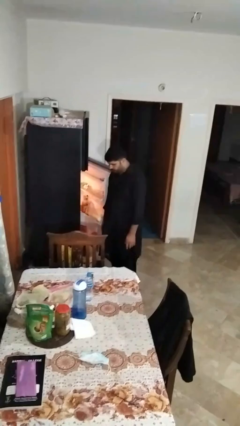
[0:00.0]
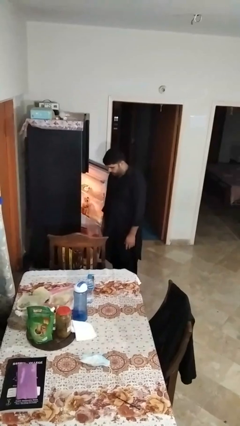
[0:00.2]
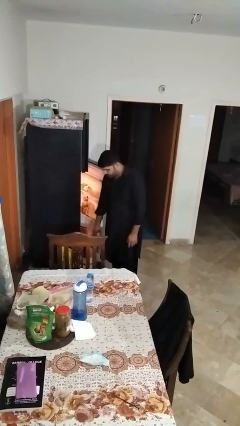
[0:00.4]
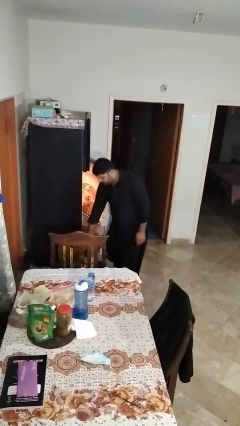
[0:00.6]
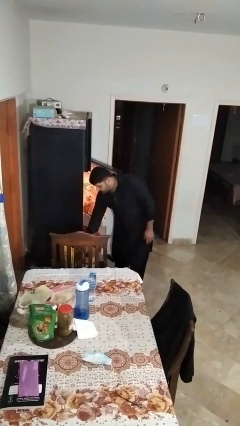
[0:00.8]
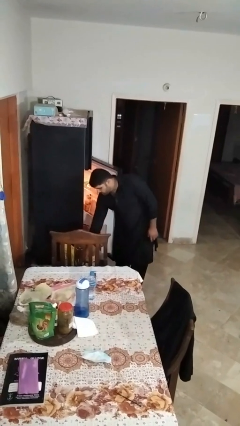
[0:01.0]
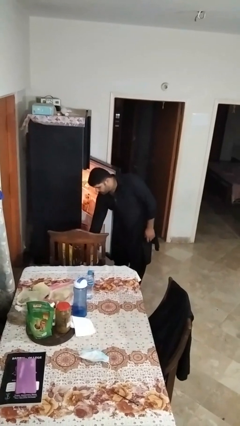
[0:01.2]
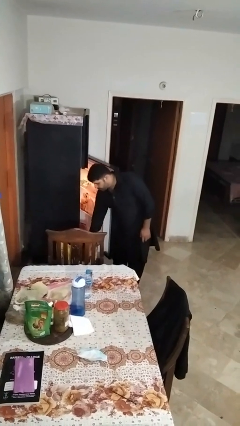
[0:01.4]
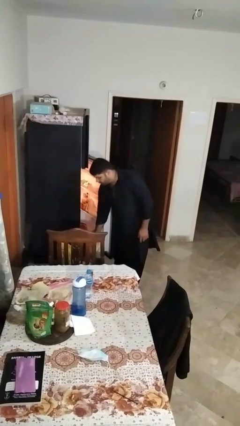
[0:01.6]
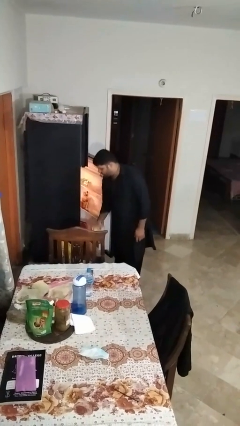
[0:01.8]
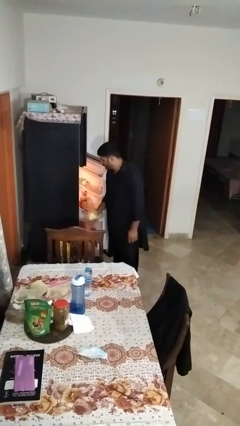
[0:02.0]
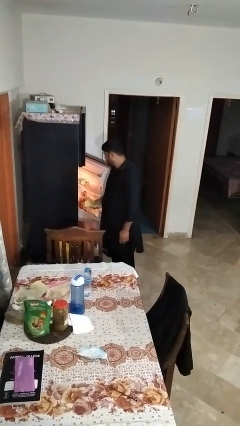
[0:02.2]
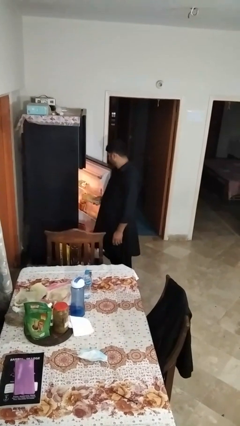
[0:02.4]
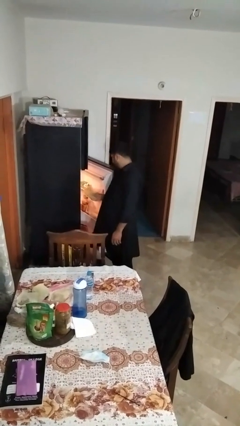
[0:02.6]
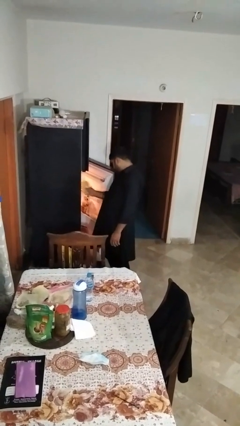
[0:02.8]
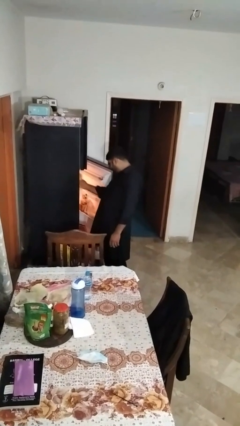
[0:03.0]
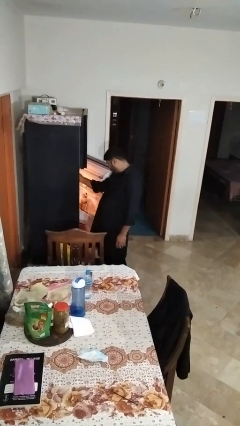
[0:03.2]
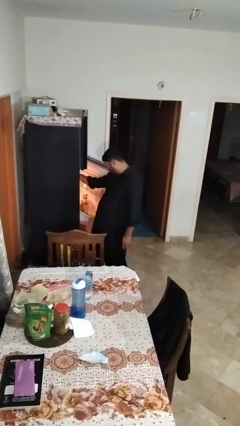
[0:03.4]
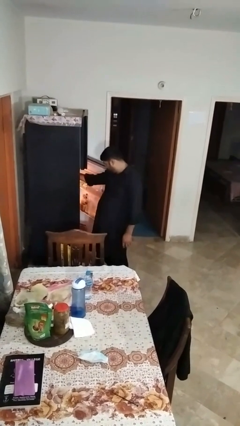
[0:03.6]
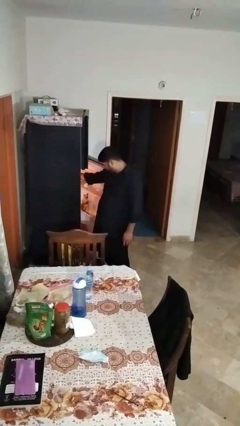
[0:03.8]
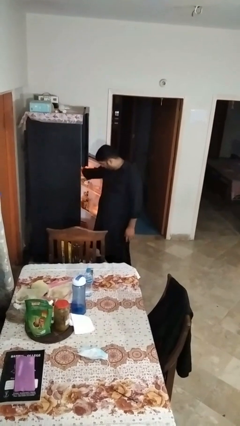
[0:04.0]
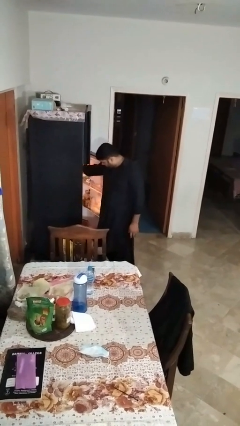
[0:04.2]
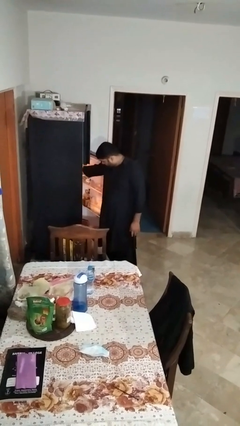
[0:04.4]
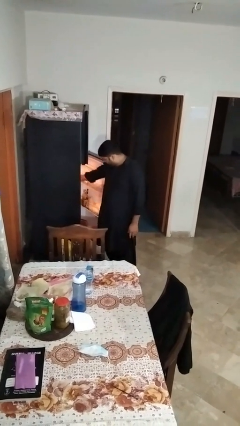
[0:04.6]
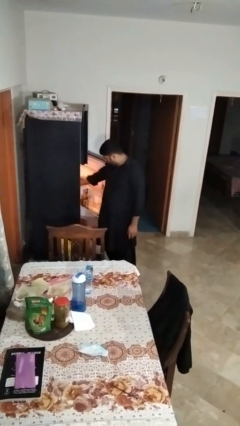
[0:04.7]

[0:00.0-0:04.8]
person loads groceries into refrigerator

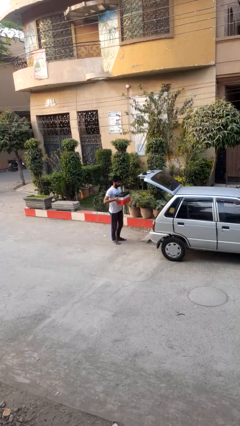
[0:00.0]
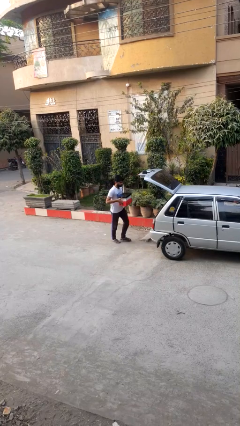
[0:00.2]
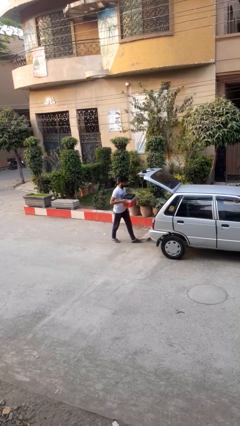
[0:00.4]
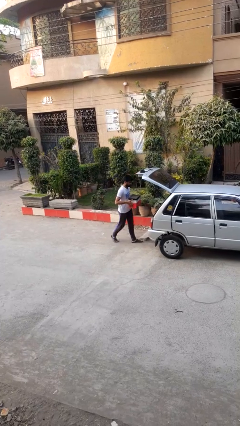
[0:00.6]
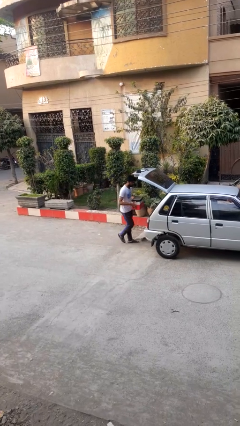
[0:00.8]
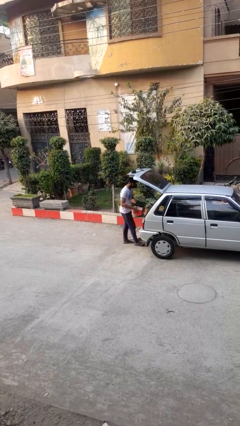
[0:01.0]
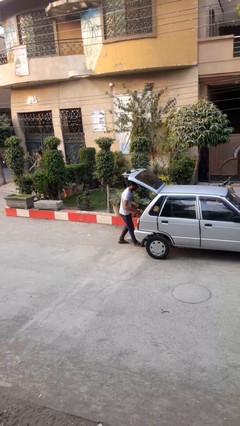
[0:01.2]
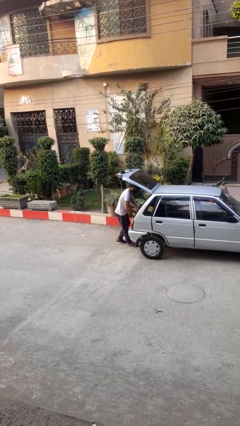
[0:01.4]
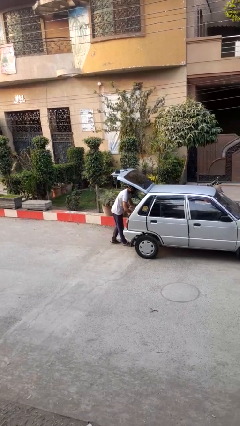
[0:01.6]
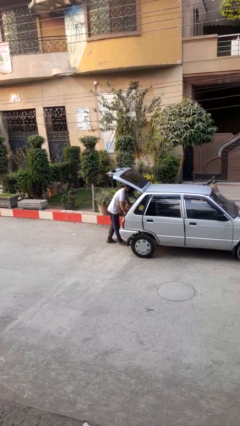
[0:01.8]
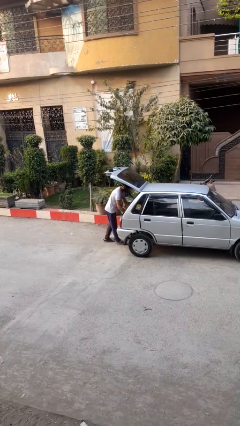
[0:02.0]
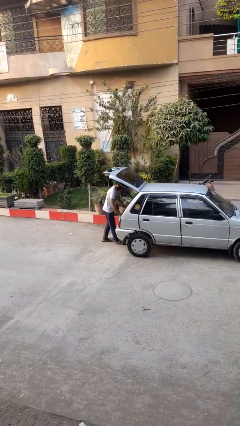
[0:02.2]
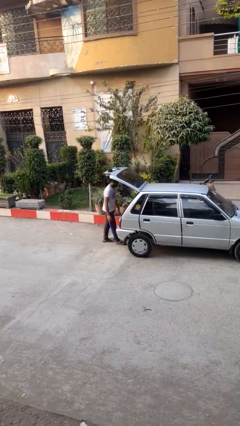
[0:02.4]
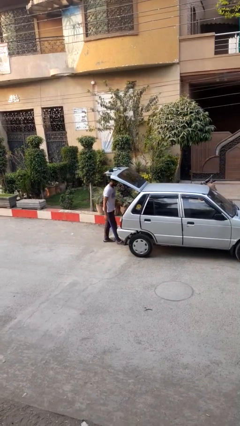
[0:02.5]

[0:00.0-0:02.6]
person loads car

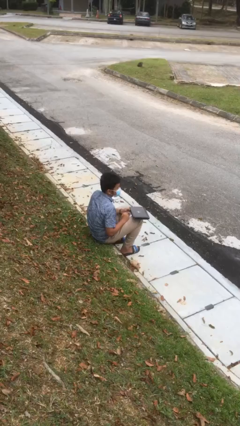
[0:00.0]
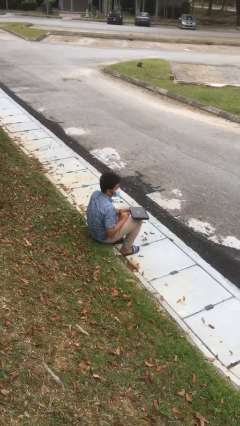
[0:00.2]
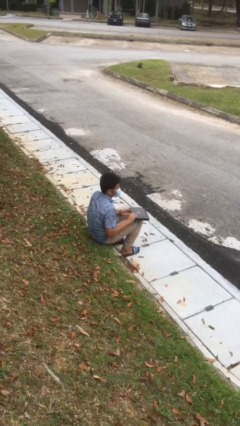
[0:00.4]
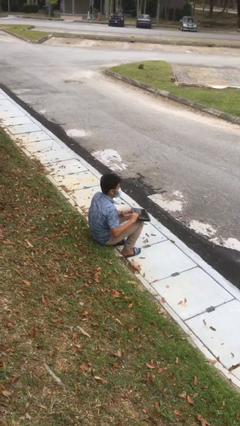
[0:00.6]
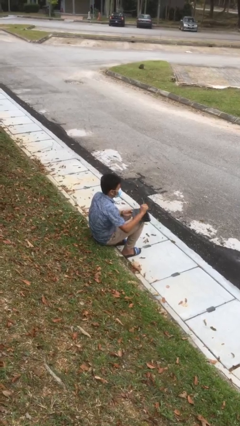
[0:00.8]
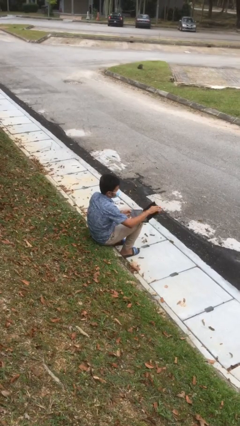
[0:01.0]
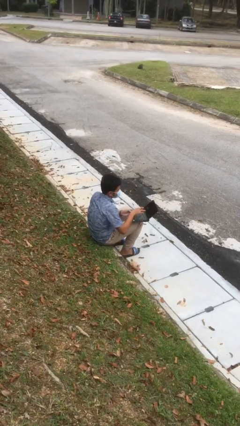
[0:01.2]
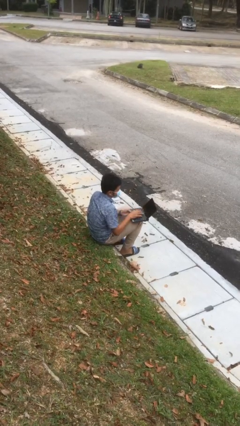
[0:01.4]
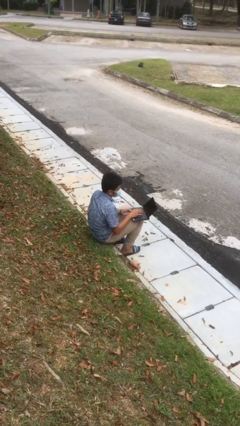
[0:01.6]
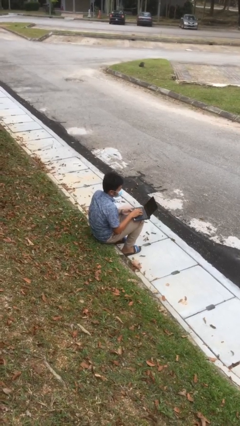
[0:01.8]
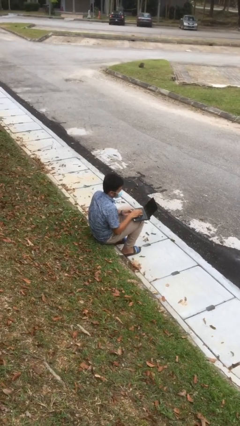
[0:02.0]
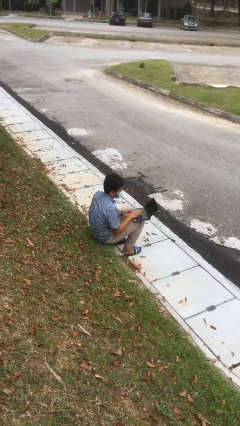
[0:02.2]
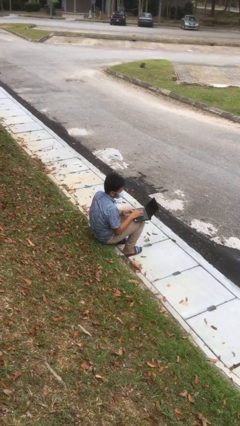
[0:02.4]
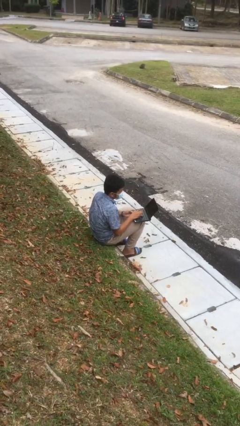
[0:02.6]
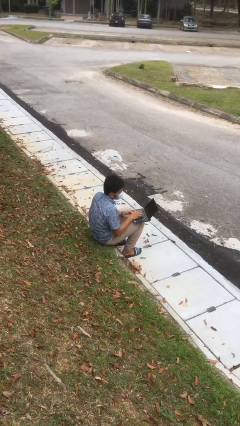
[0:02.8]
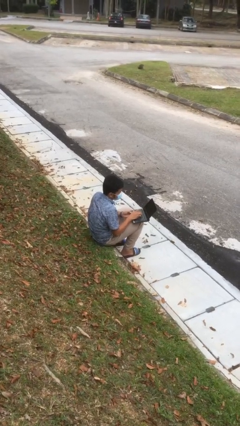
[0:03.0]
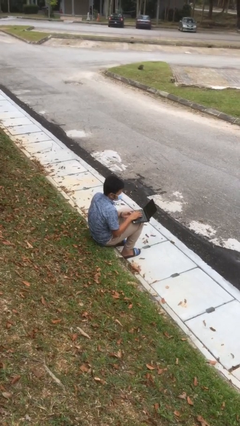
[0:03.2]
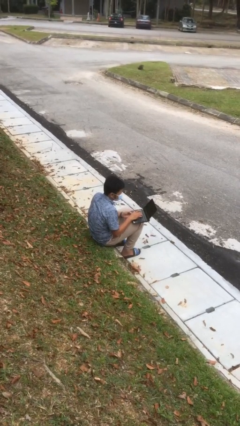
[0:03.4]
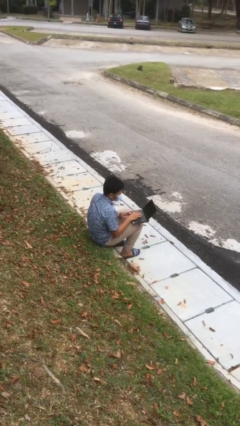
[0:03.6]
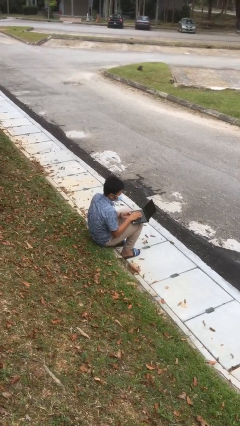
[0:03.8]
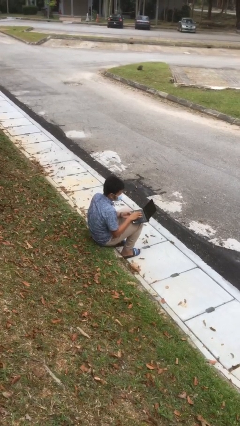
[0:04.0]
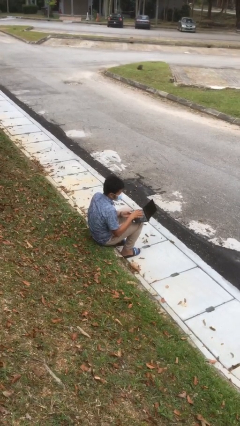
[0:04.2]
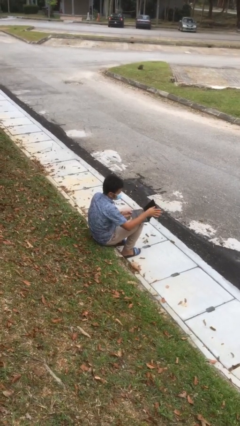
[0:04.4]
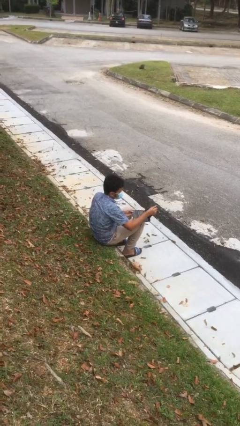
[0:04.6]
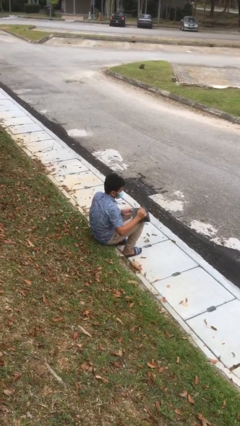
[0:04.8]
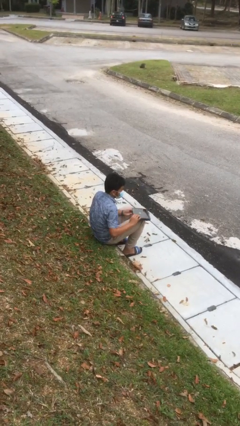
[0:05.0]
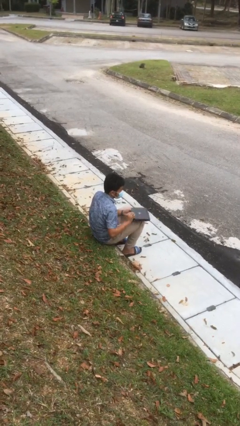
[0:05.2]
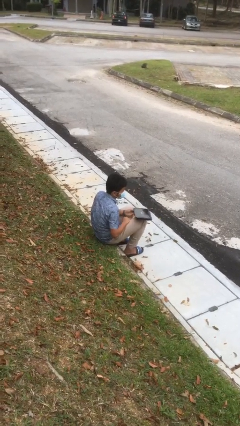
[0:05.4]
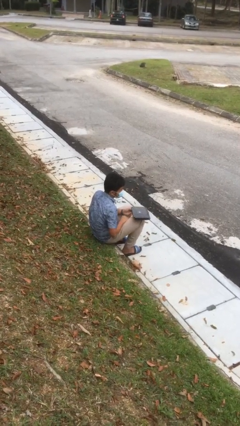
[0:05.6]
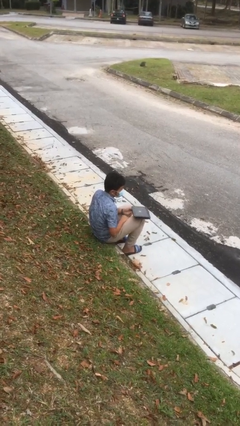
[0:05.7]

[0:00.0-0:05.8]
person interacts with laptop

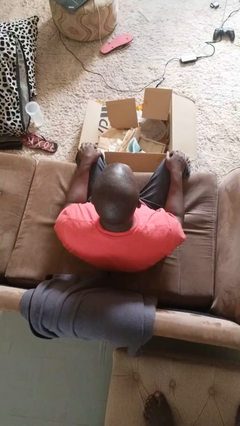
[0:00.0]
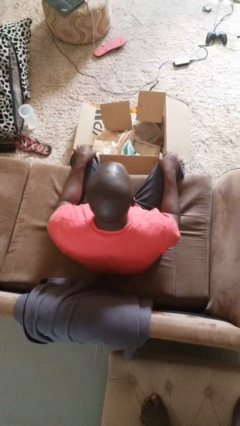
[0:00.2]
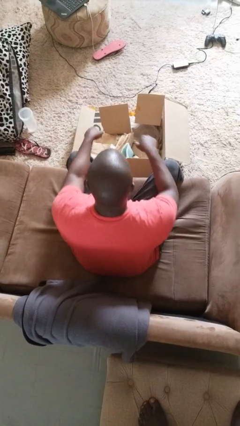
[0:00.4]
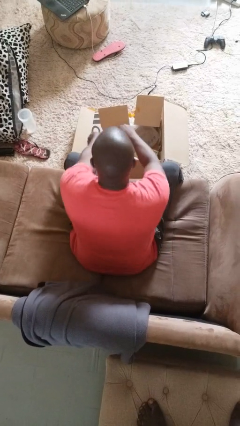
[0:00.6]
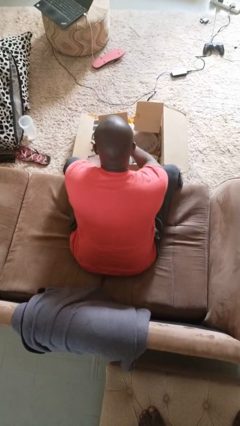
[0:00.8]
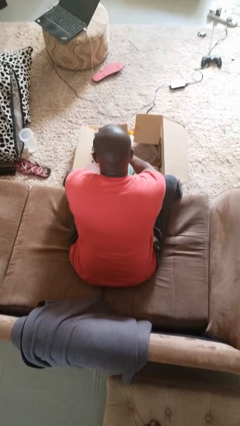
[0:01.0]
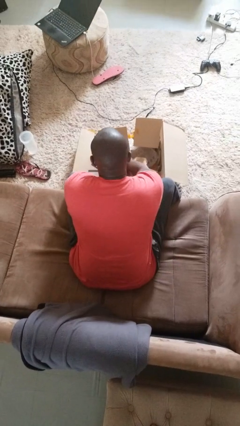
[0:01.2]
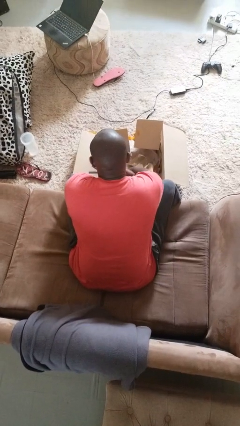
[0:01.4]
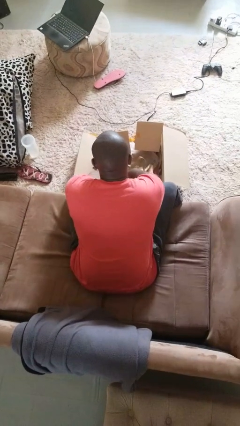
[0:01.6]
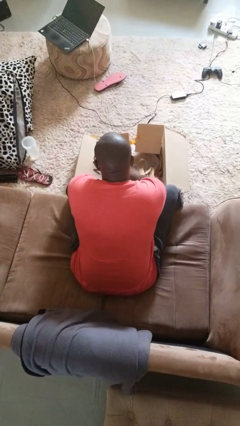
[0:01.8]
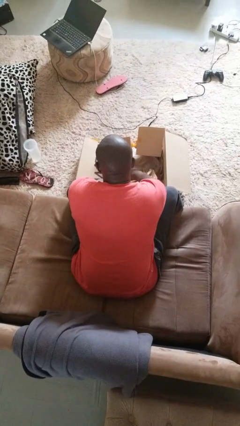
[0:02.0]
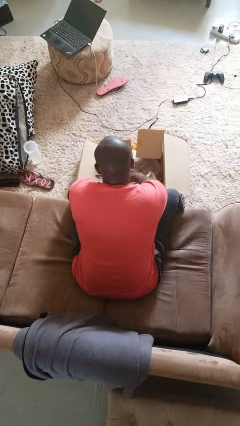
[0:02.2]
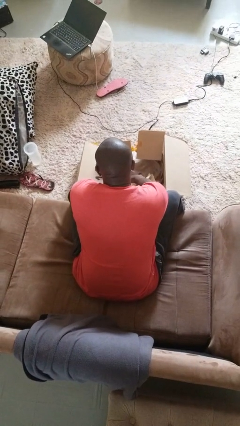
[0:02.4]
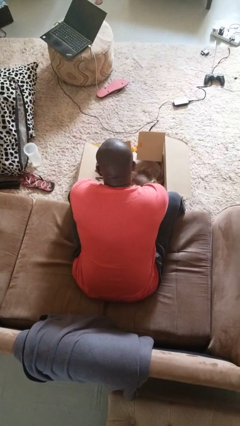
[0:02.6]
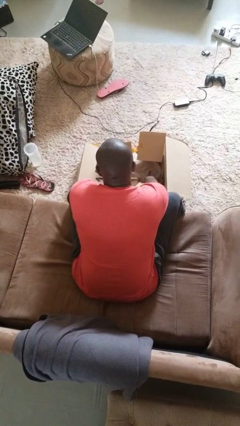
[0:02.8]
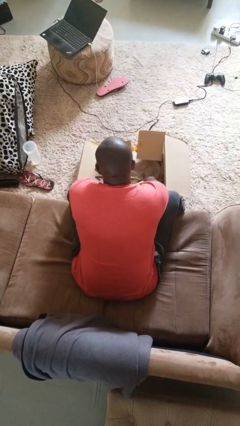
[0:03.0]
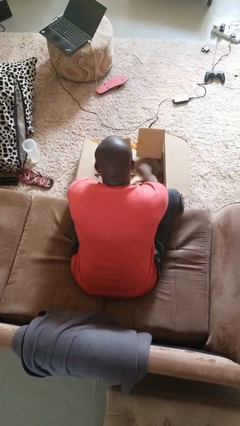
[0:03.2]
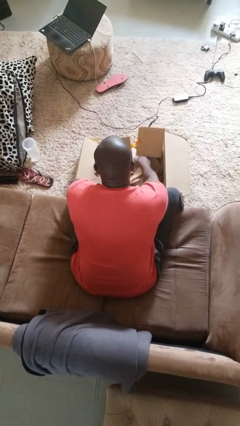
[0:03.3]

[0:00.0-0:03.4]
person searches in box

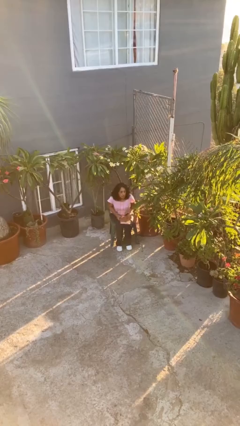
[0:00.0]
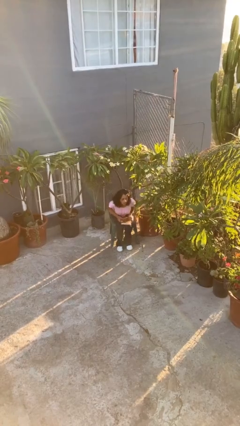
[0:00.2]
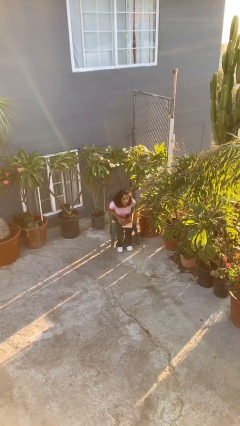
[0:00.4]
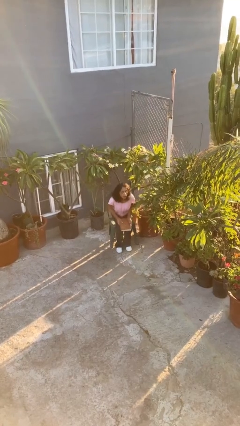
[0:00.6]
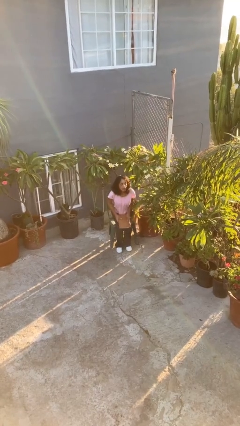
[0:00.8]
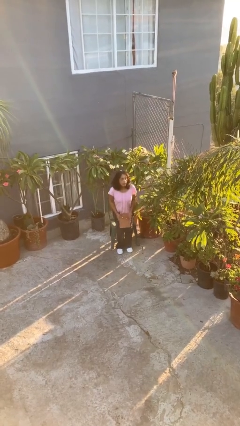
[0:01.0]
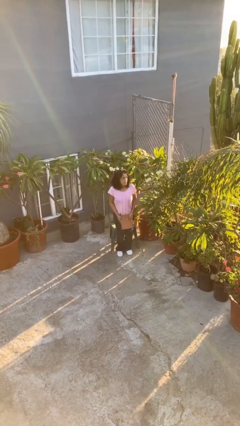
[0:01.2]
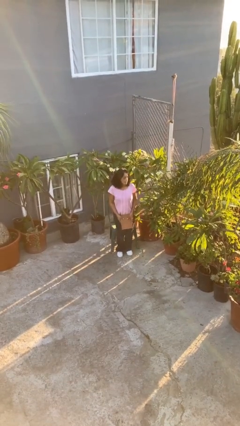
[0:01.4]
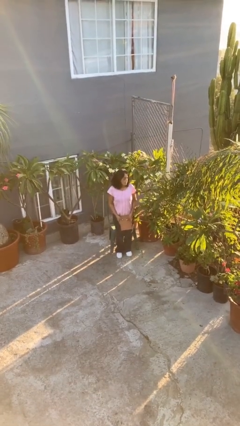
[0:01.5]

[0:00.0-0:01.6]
person stands up
